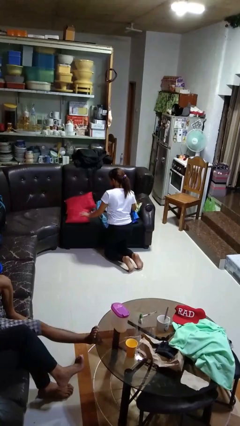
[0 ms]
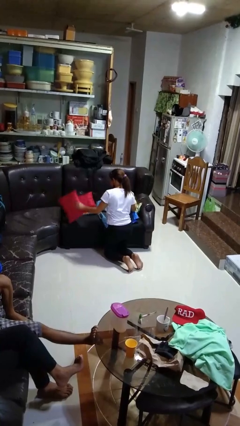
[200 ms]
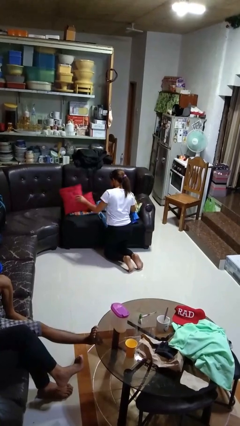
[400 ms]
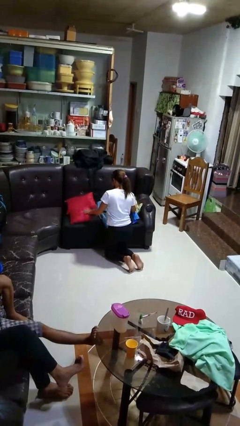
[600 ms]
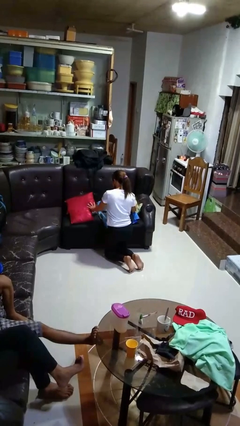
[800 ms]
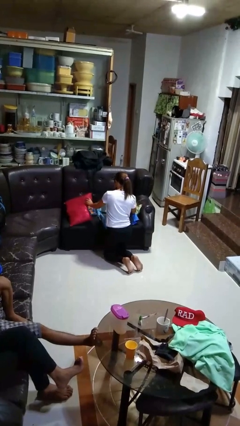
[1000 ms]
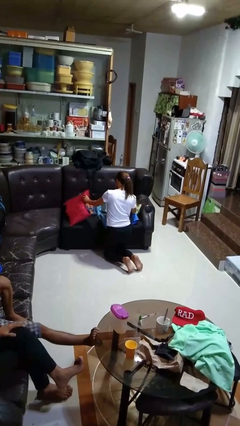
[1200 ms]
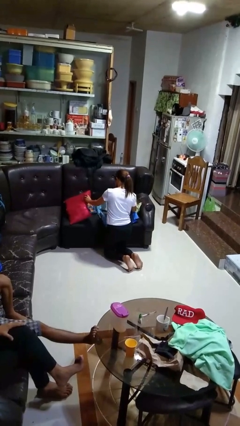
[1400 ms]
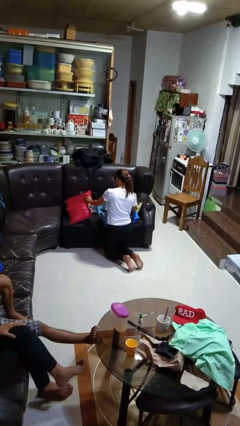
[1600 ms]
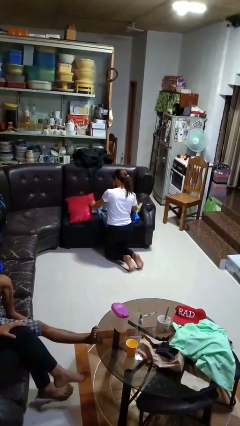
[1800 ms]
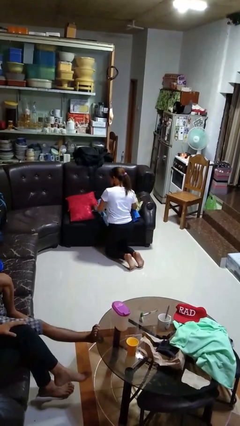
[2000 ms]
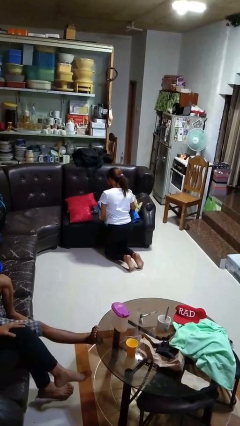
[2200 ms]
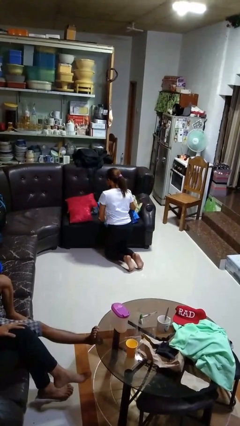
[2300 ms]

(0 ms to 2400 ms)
person searches in couch

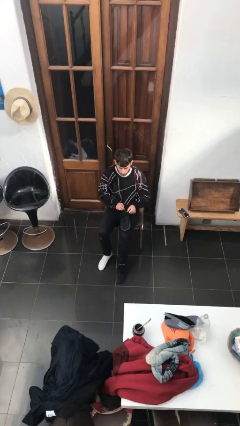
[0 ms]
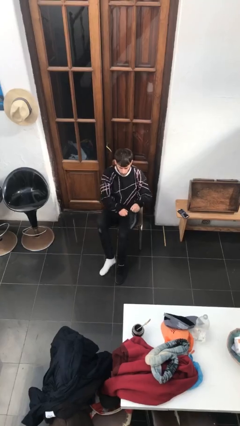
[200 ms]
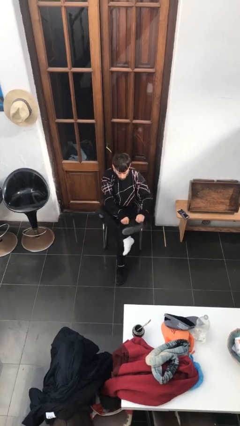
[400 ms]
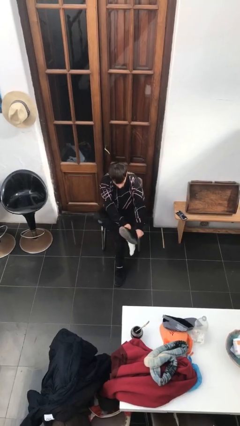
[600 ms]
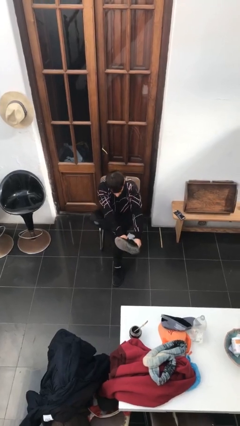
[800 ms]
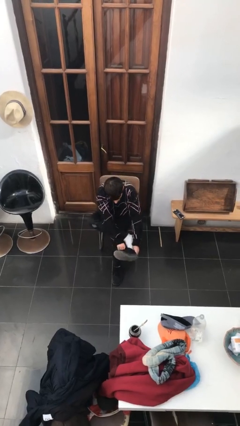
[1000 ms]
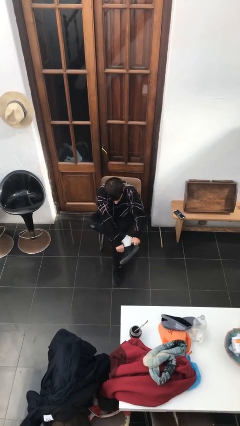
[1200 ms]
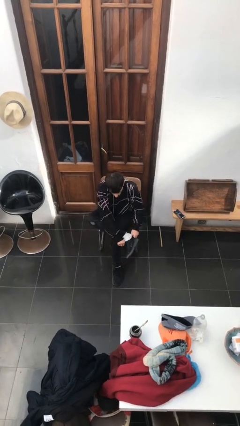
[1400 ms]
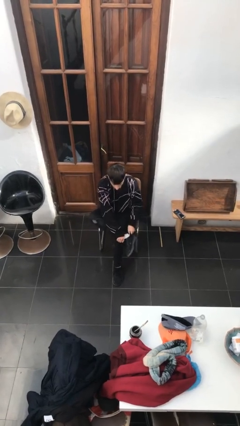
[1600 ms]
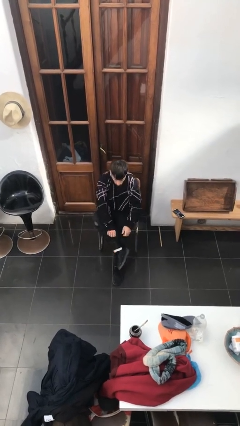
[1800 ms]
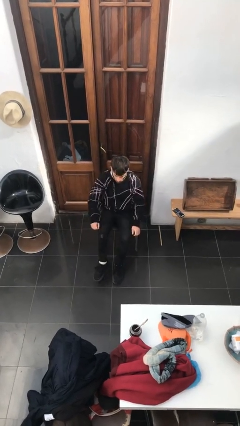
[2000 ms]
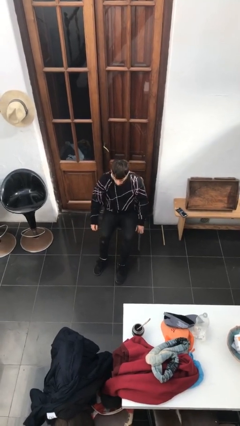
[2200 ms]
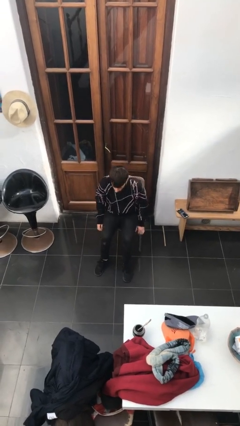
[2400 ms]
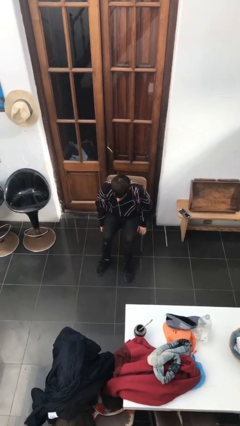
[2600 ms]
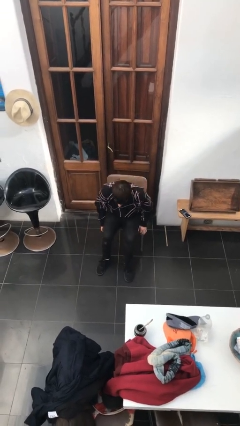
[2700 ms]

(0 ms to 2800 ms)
person puts on shoes

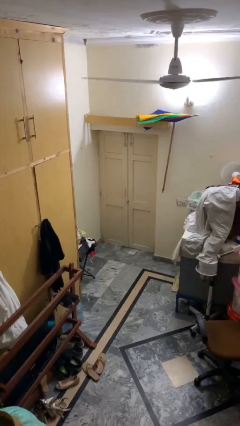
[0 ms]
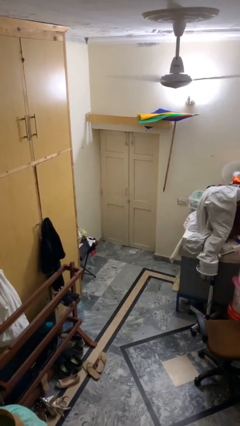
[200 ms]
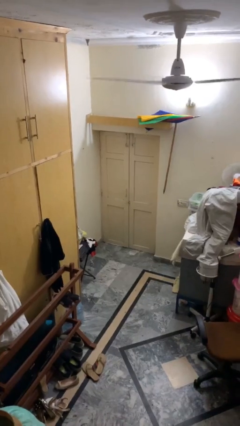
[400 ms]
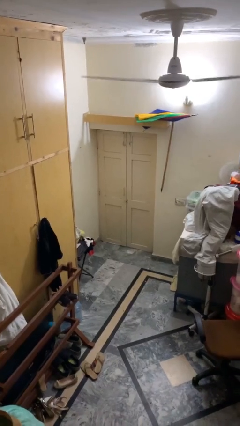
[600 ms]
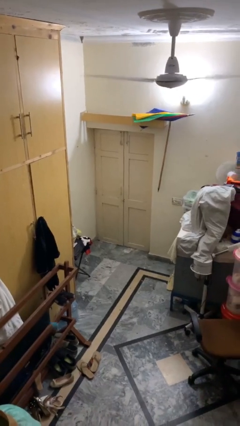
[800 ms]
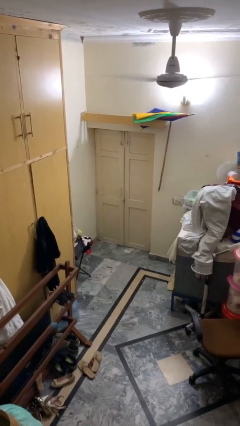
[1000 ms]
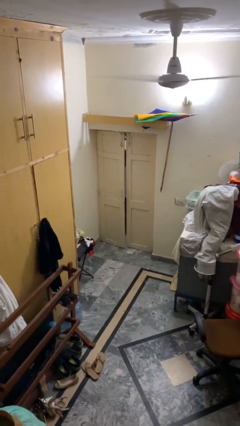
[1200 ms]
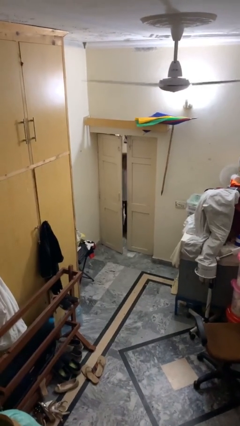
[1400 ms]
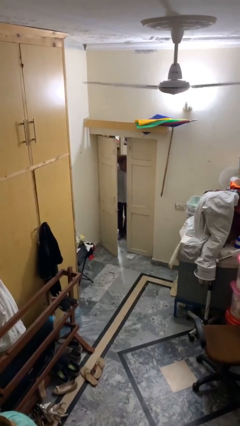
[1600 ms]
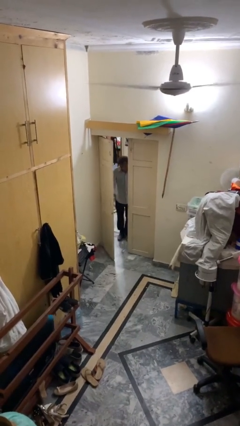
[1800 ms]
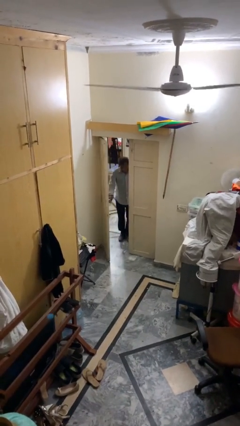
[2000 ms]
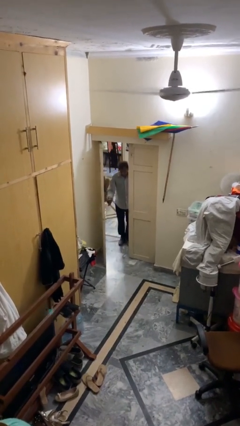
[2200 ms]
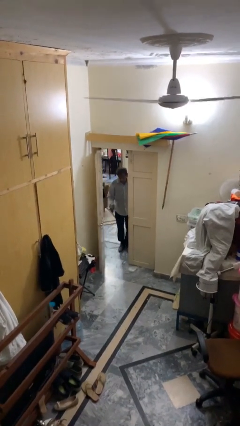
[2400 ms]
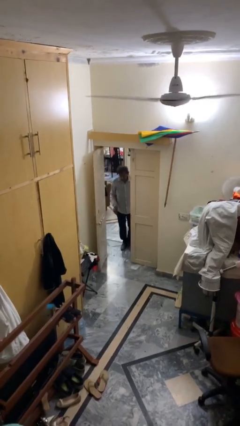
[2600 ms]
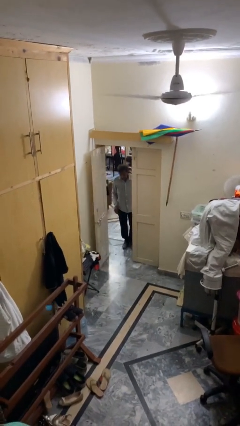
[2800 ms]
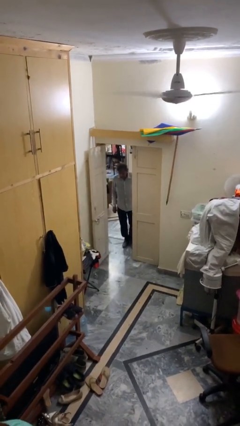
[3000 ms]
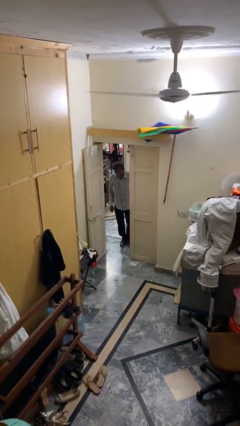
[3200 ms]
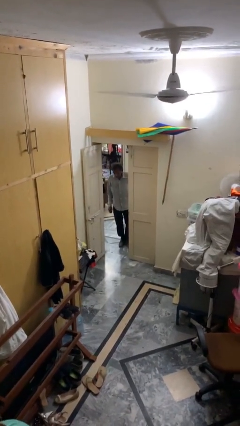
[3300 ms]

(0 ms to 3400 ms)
person opens facility door

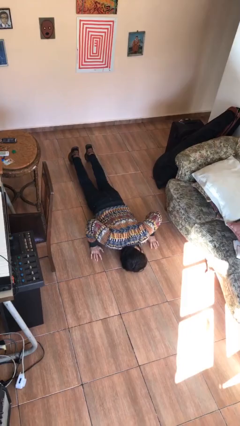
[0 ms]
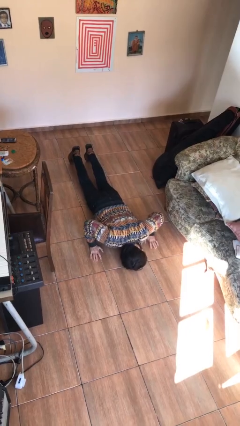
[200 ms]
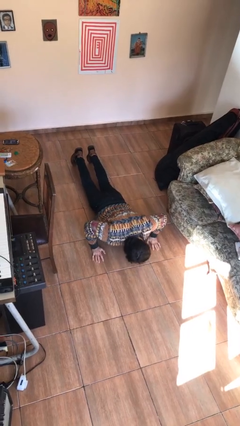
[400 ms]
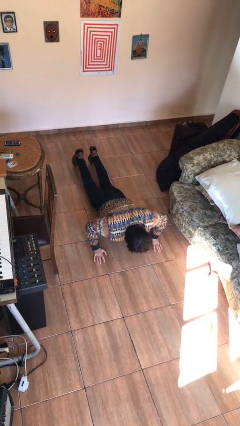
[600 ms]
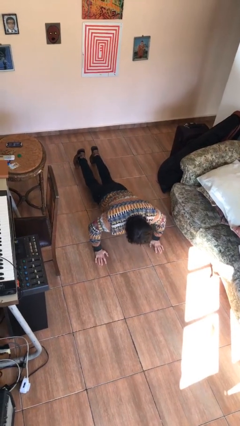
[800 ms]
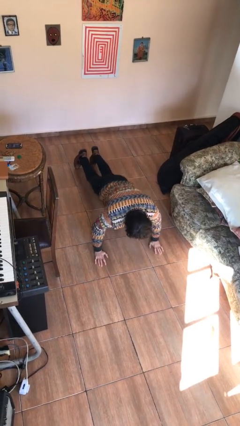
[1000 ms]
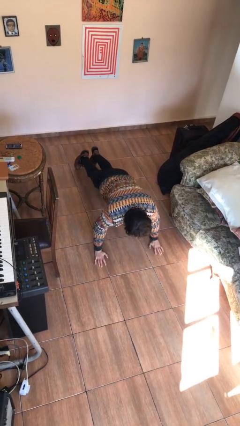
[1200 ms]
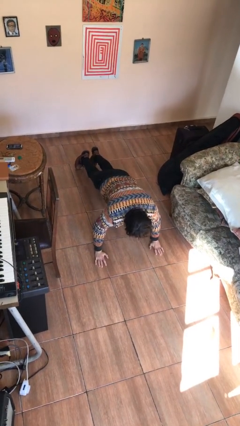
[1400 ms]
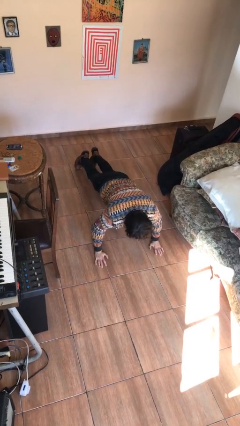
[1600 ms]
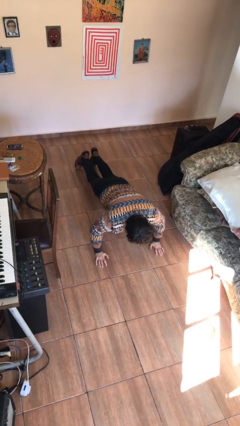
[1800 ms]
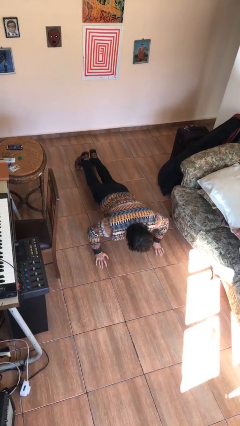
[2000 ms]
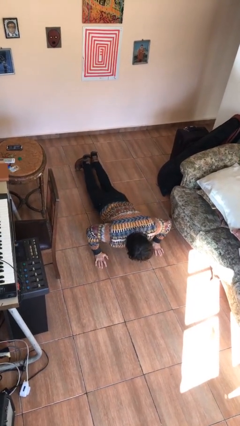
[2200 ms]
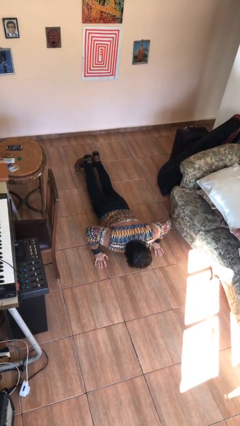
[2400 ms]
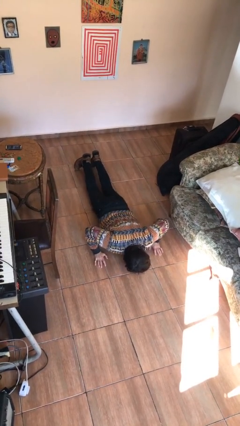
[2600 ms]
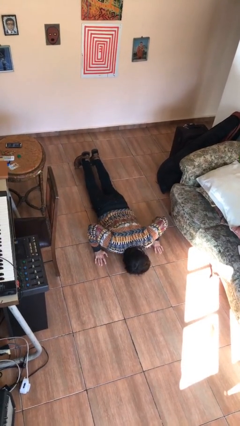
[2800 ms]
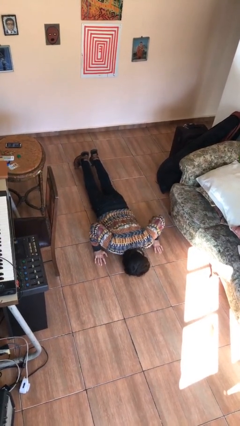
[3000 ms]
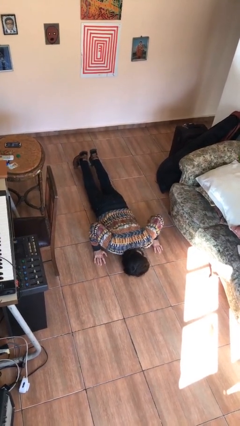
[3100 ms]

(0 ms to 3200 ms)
person exercises with pushup

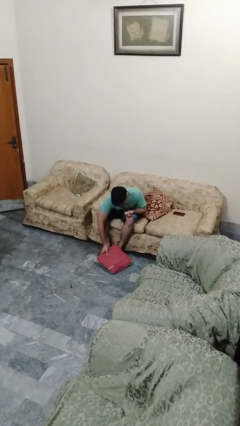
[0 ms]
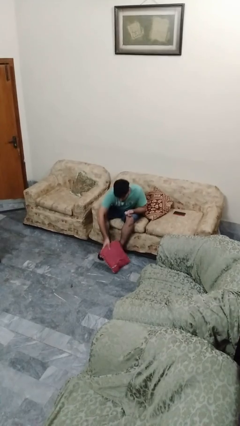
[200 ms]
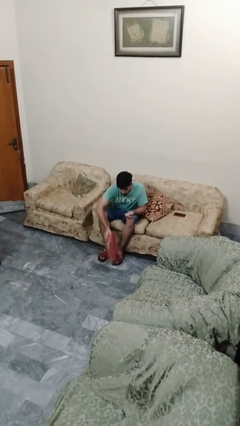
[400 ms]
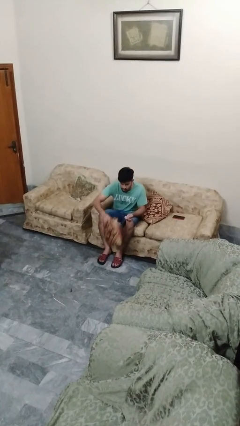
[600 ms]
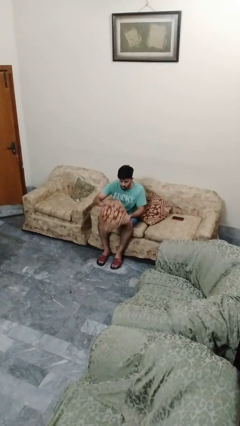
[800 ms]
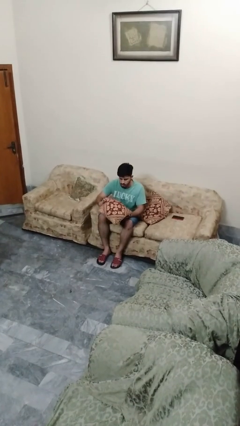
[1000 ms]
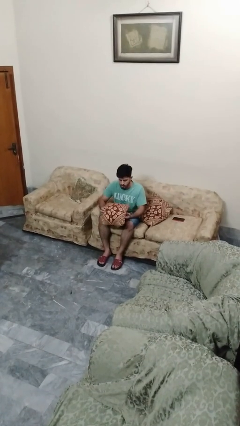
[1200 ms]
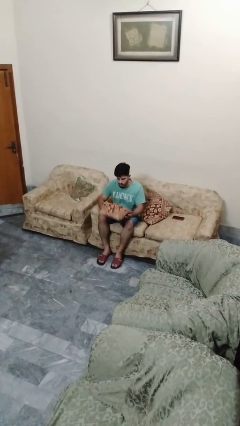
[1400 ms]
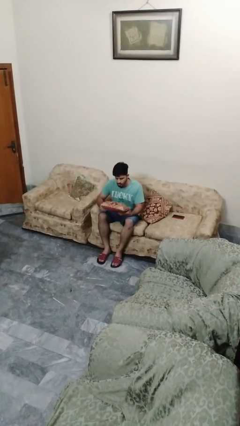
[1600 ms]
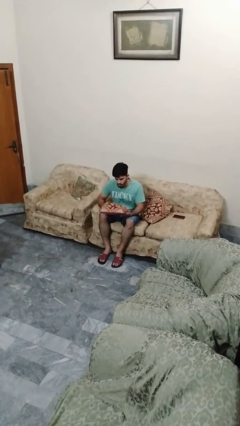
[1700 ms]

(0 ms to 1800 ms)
person picks up object from floor

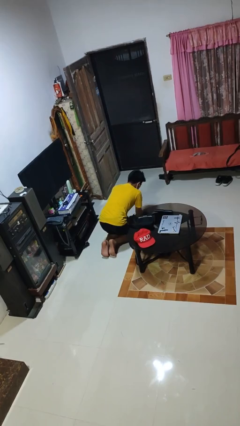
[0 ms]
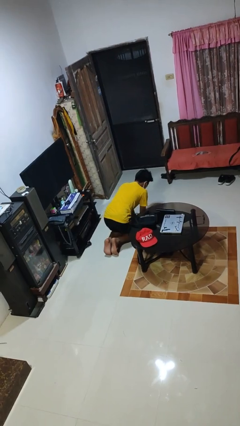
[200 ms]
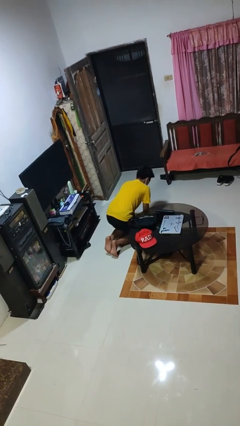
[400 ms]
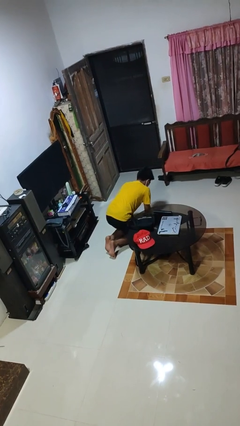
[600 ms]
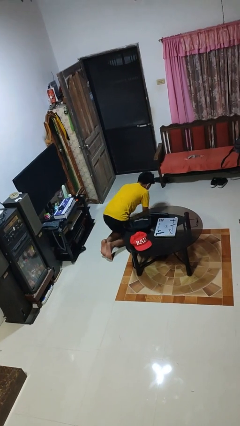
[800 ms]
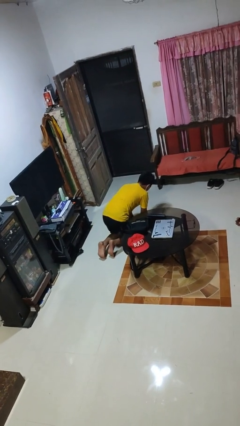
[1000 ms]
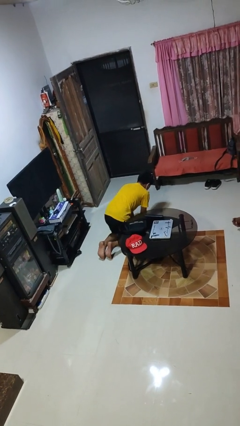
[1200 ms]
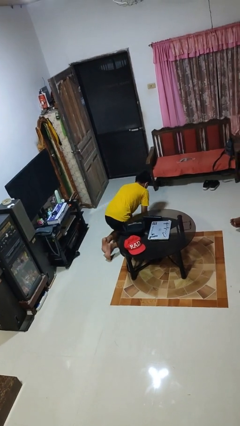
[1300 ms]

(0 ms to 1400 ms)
person crawls

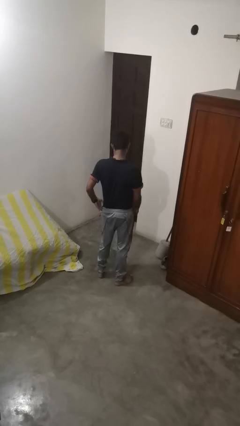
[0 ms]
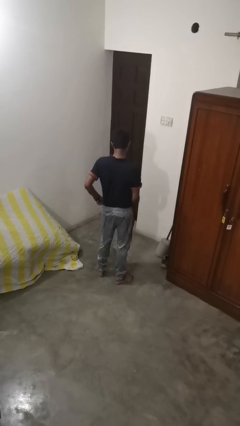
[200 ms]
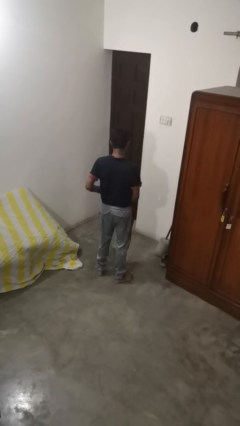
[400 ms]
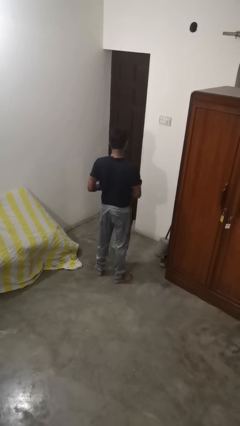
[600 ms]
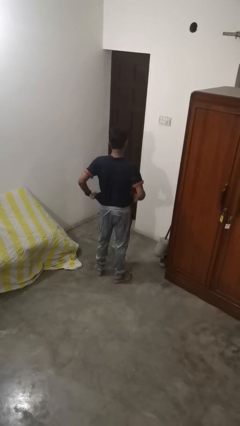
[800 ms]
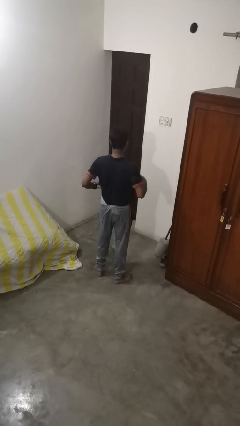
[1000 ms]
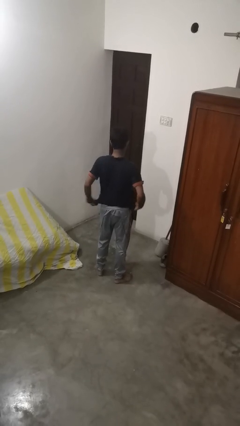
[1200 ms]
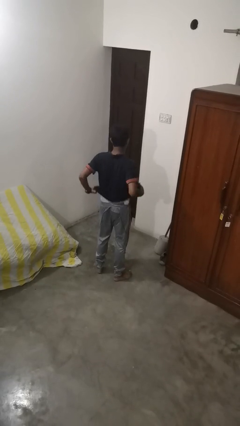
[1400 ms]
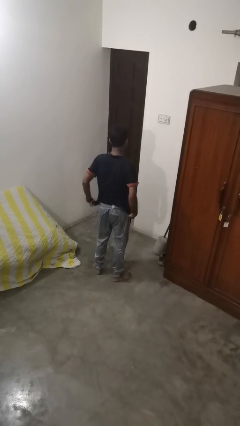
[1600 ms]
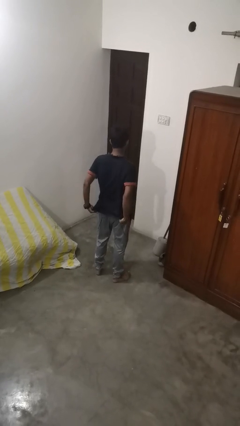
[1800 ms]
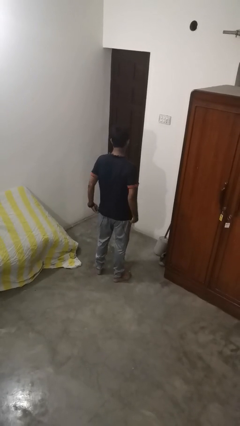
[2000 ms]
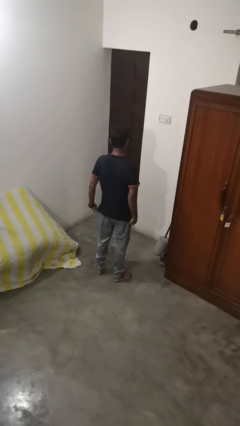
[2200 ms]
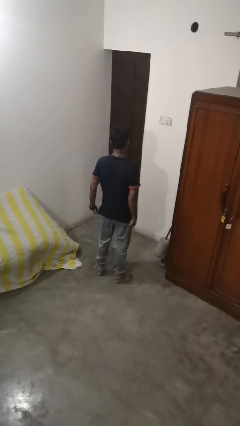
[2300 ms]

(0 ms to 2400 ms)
person untucks shirt

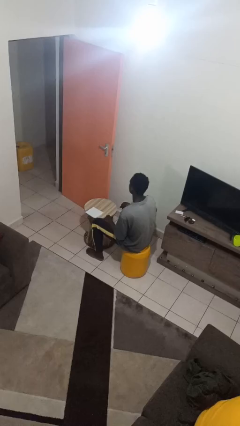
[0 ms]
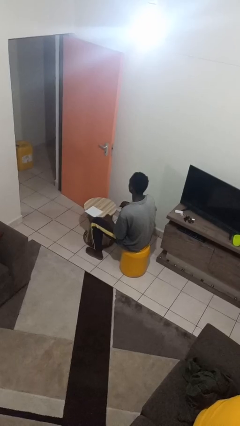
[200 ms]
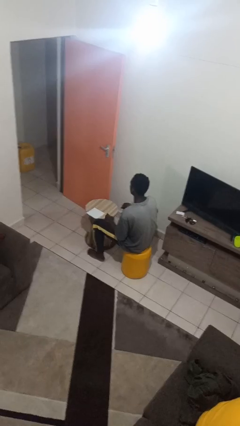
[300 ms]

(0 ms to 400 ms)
person wipes mouth with napkin
